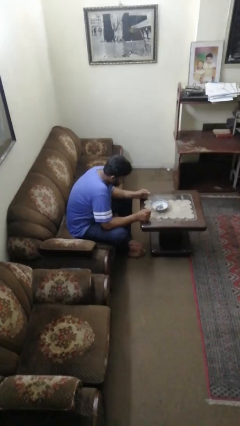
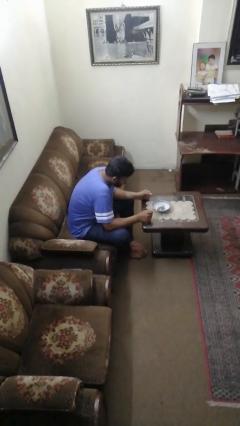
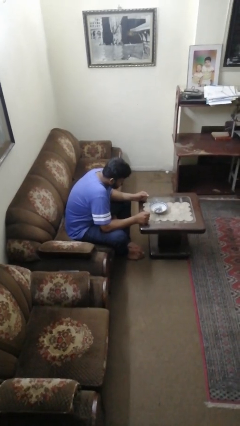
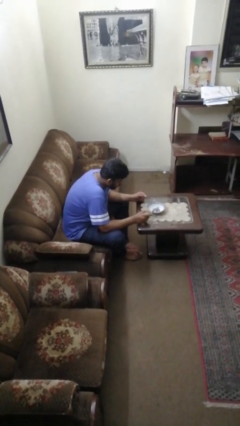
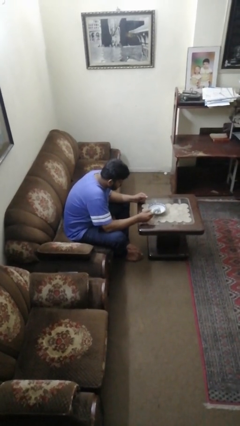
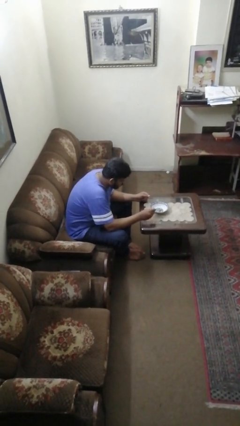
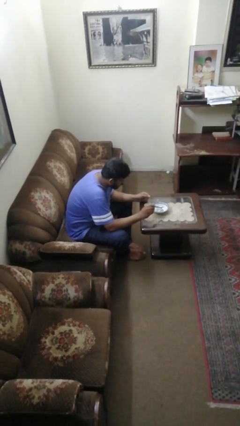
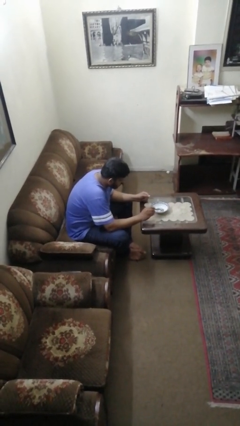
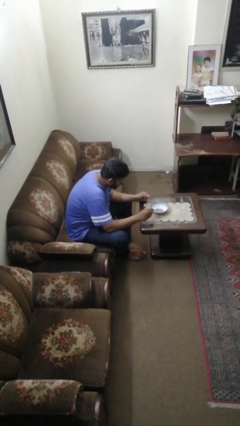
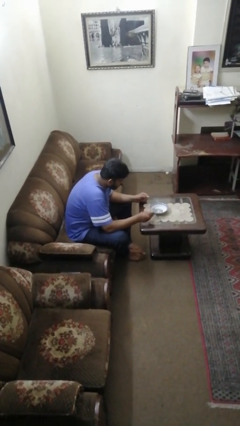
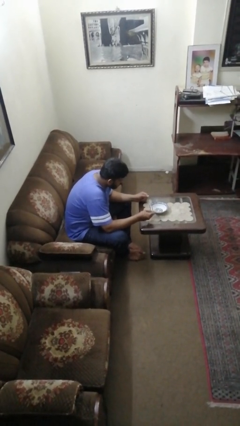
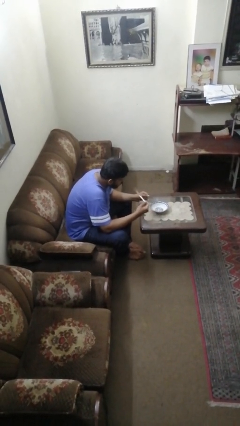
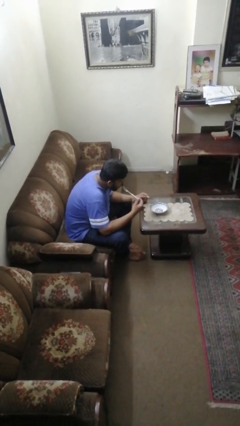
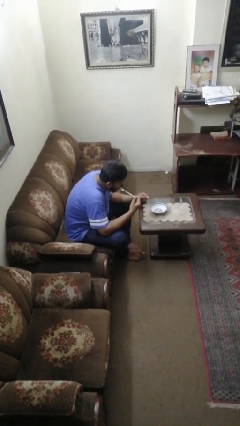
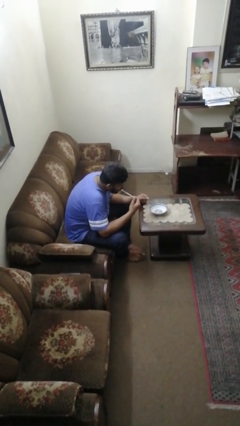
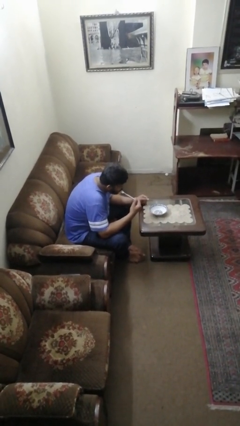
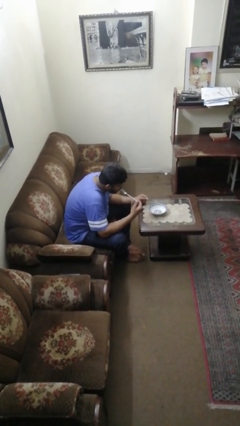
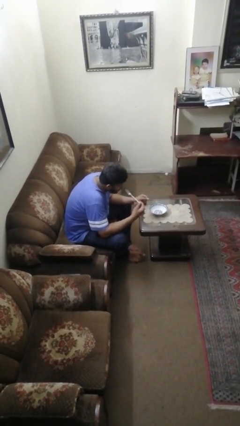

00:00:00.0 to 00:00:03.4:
person eats with utensil

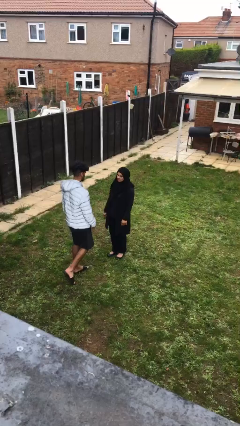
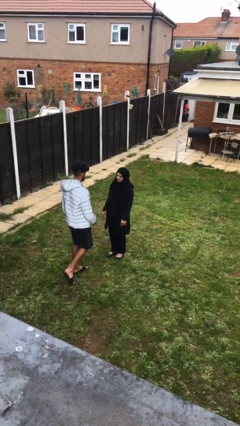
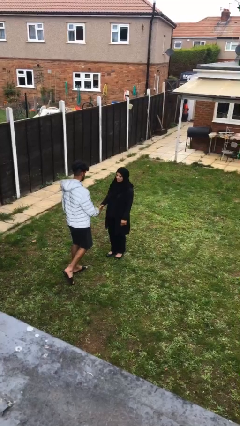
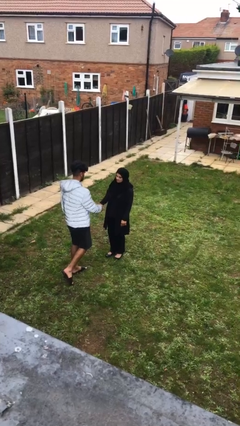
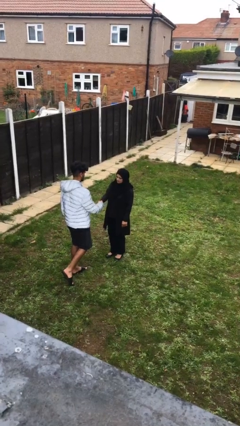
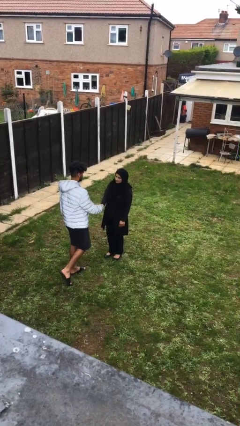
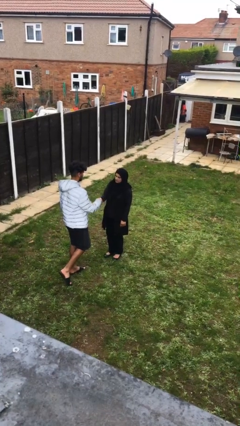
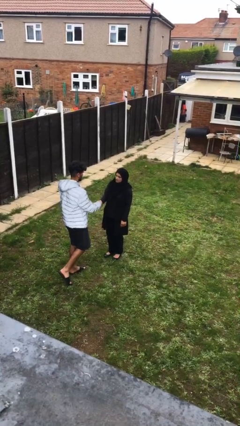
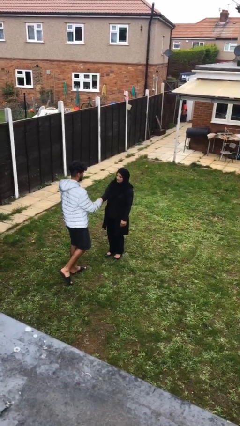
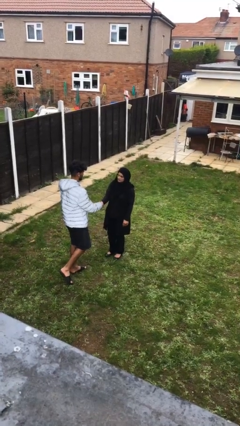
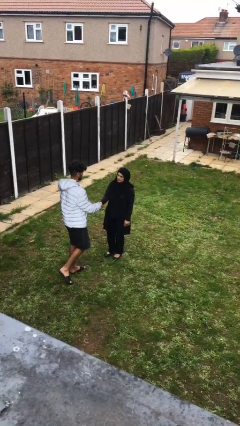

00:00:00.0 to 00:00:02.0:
person shakes hand

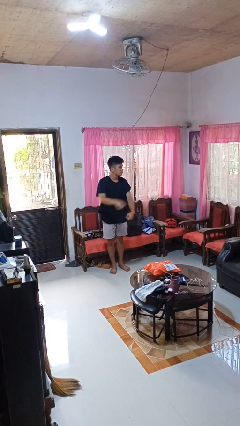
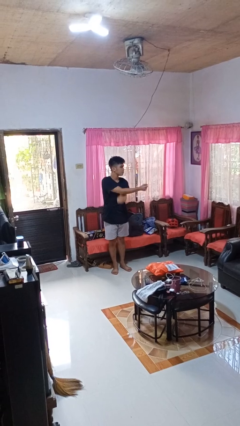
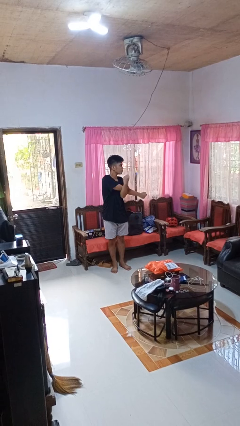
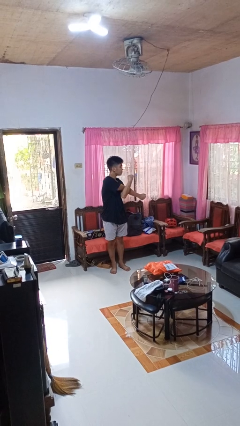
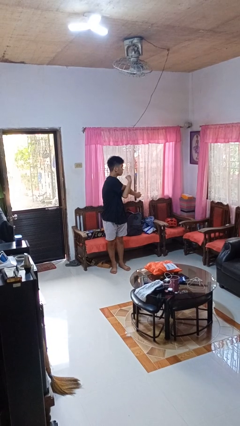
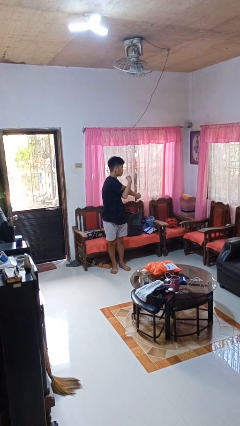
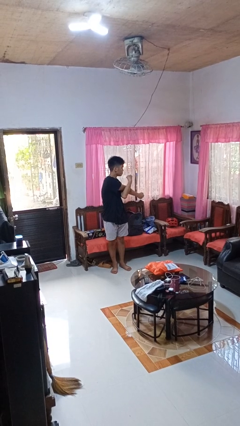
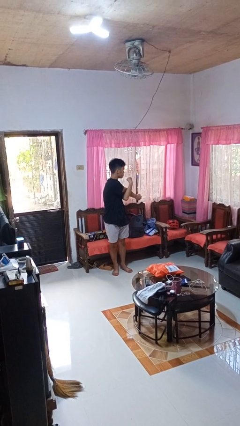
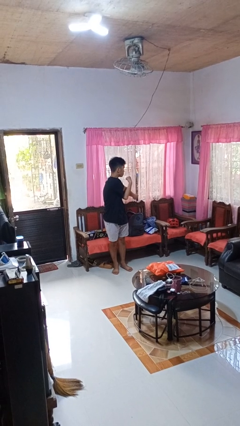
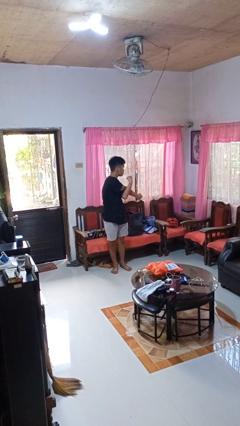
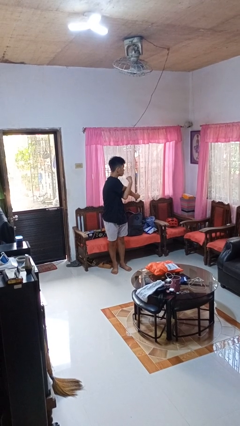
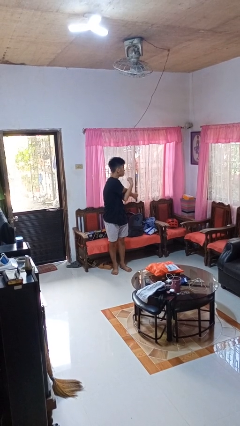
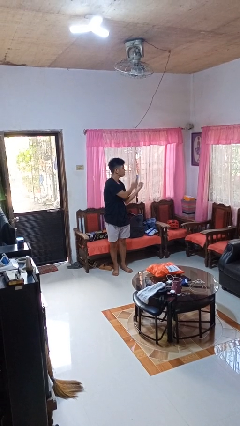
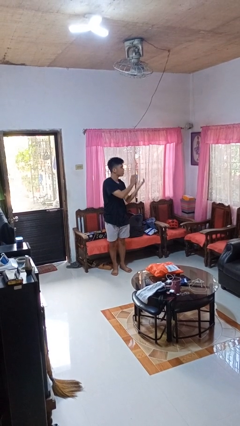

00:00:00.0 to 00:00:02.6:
person stretches arms to side

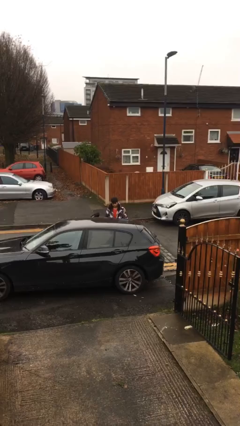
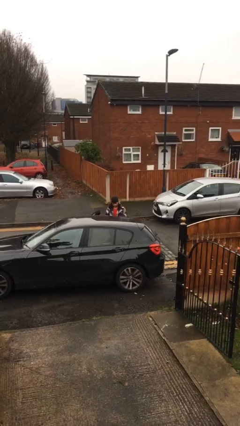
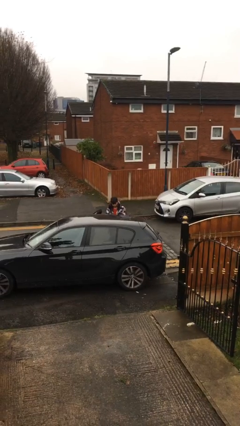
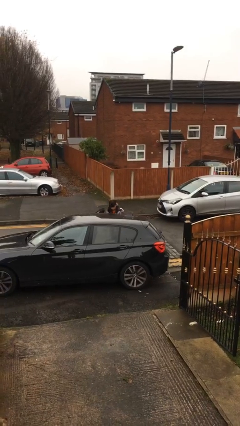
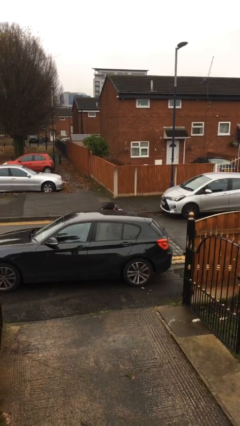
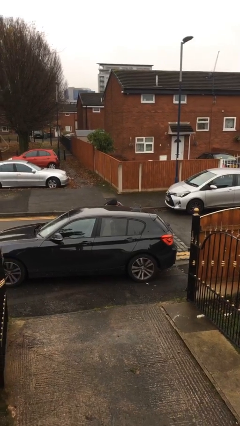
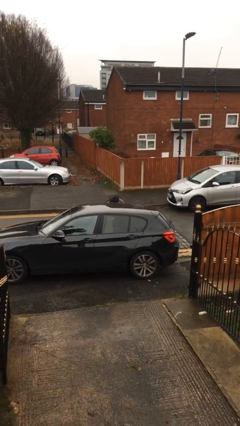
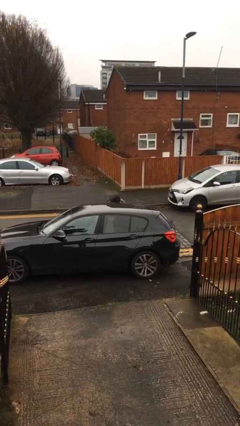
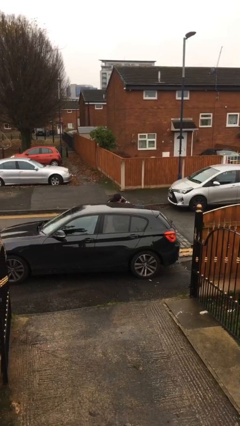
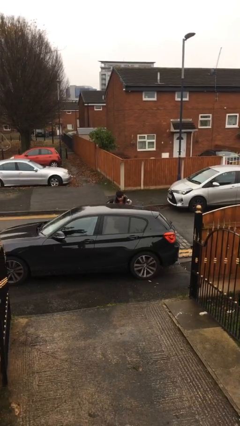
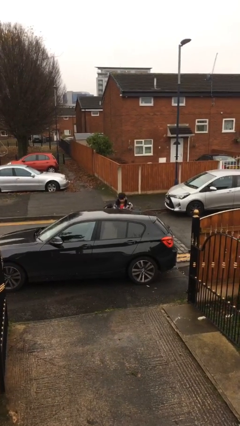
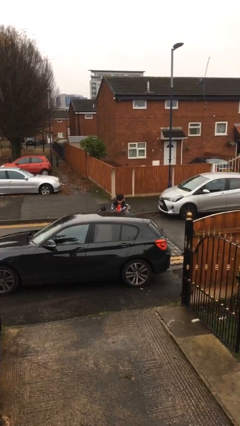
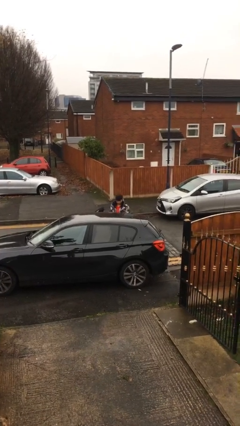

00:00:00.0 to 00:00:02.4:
person unloads car

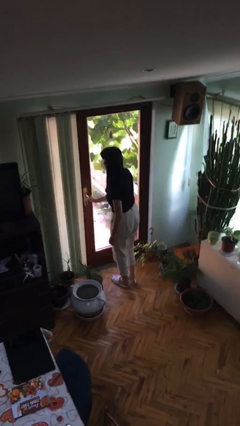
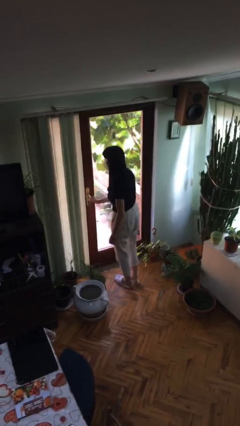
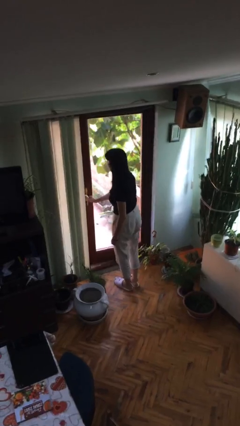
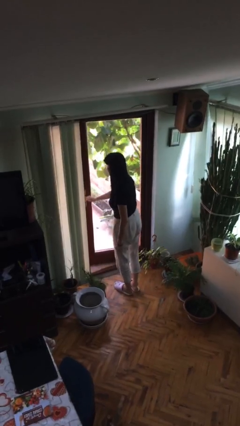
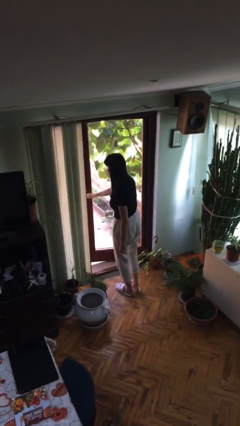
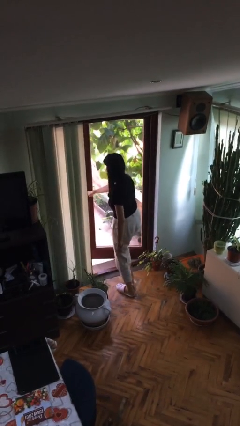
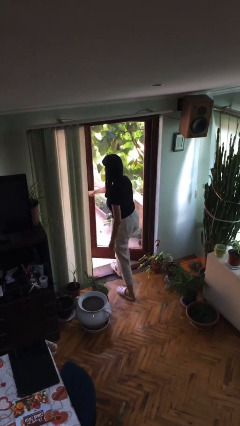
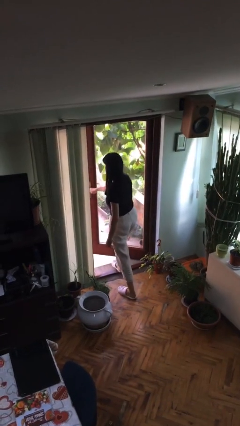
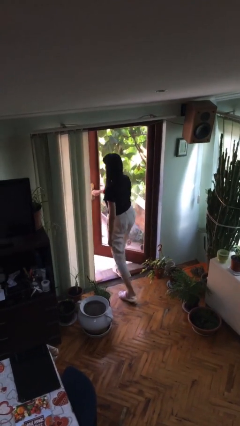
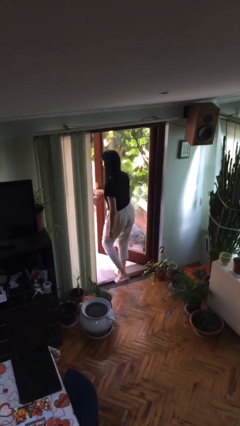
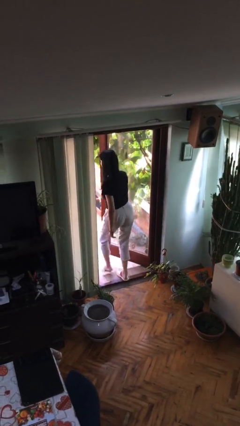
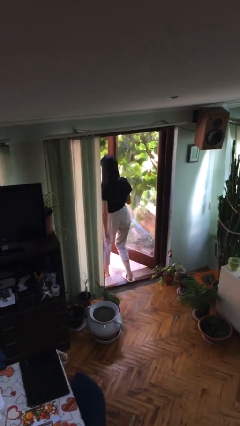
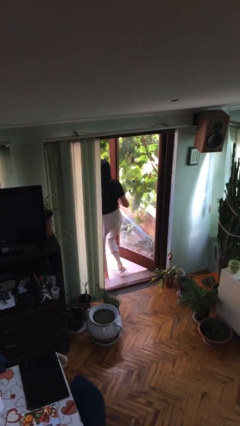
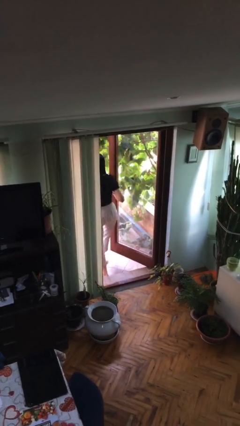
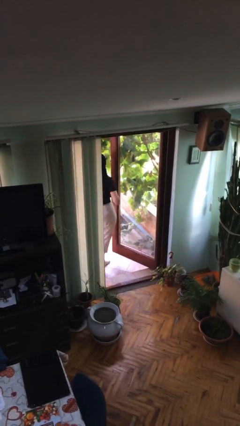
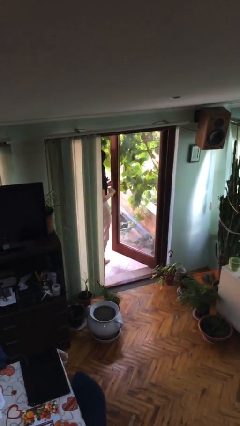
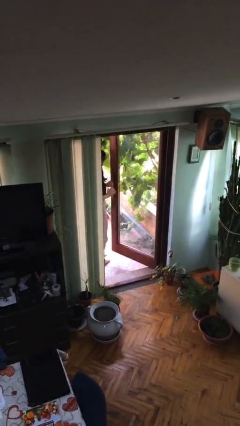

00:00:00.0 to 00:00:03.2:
person exits scene through structure

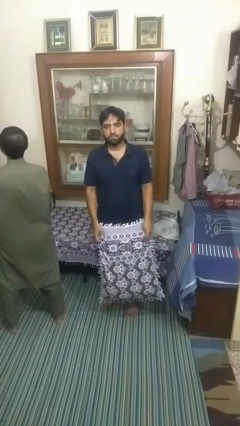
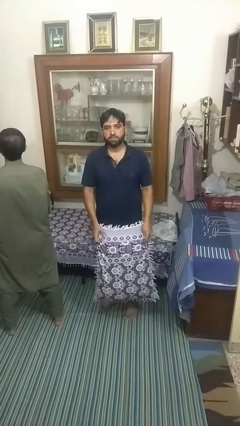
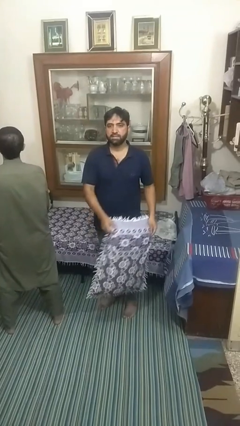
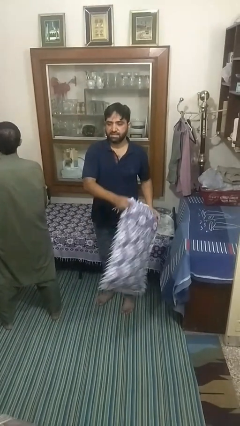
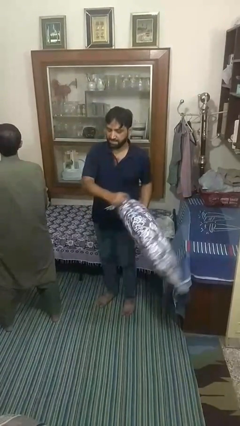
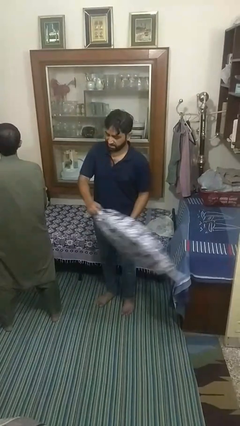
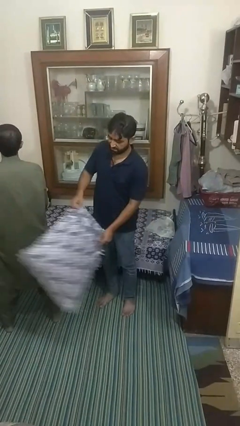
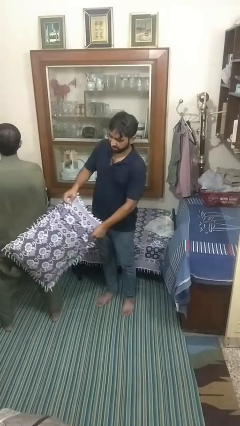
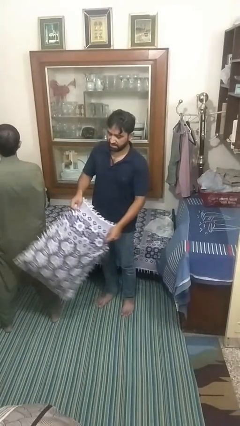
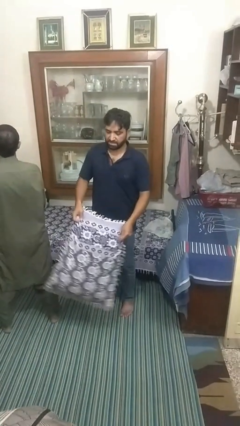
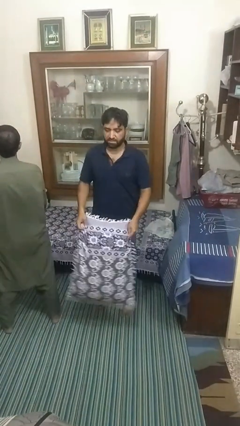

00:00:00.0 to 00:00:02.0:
person hits person with pillow

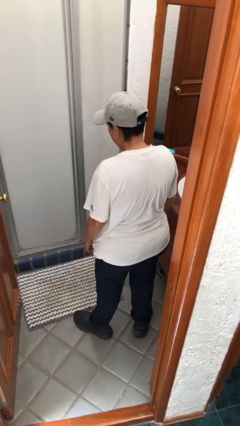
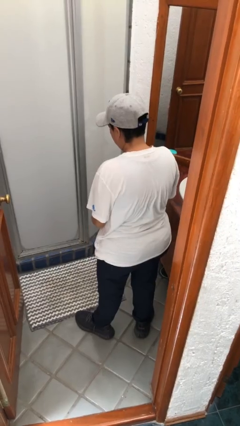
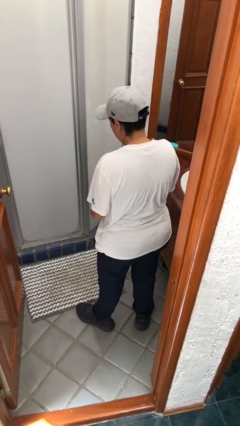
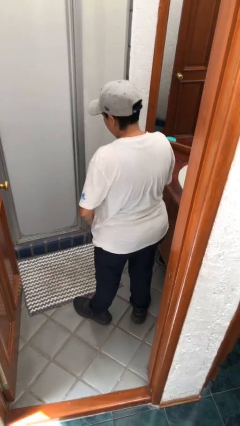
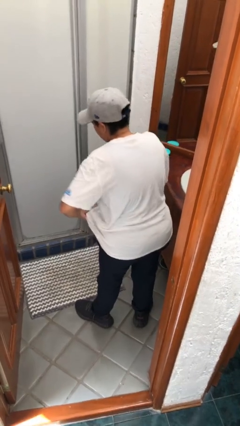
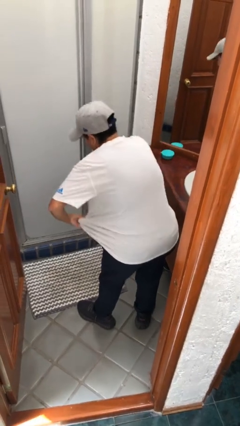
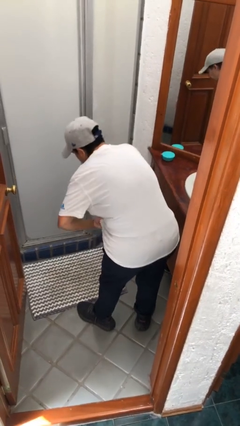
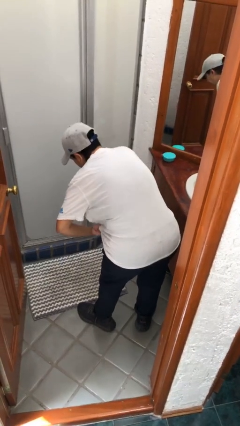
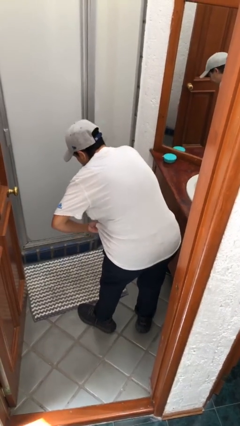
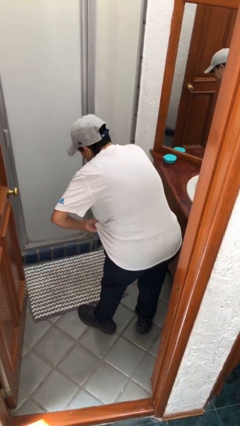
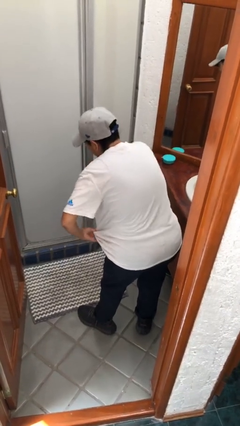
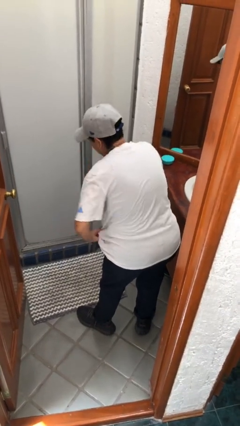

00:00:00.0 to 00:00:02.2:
person applies deodorant
